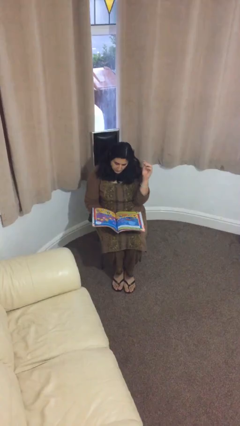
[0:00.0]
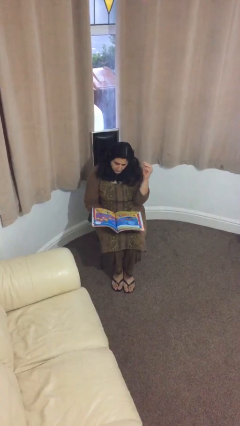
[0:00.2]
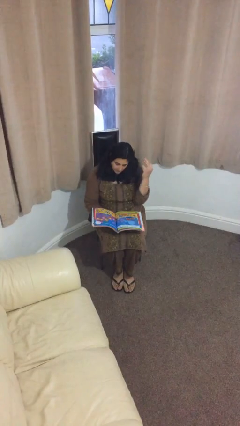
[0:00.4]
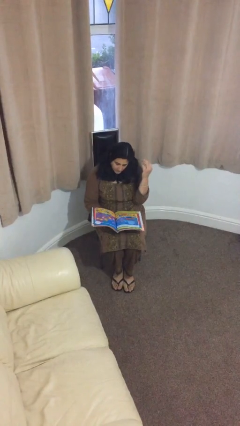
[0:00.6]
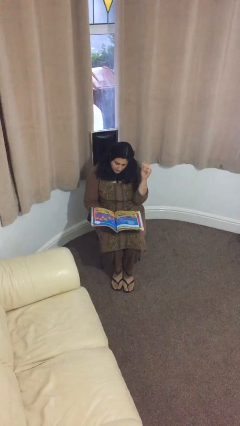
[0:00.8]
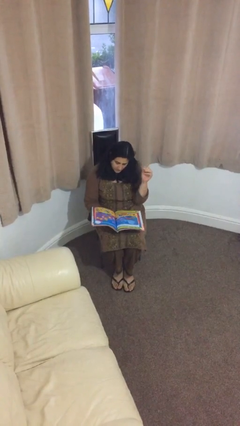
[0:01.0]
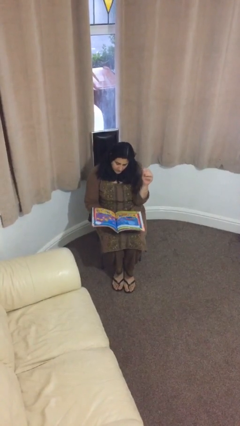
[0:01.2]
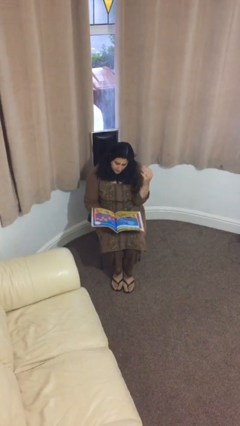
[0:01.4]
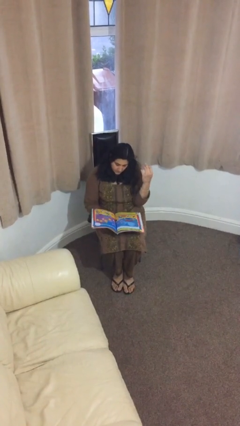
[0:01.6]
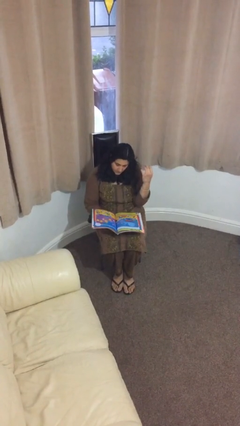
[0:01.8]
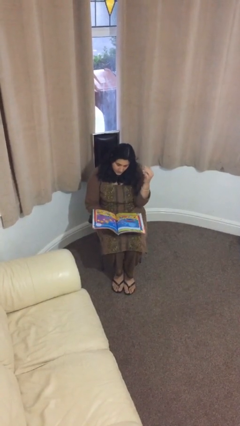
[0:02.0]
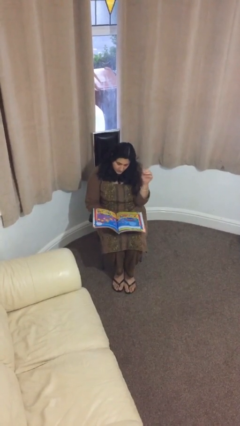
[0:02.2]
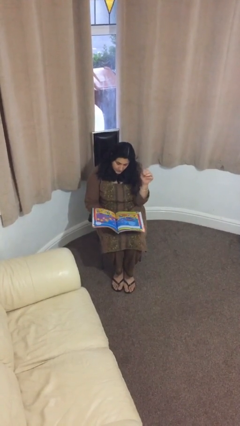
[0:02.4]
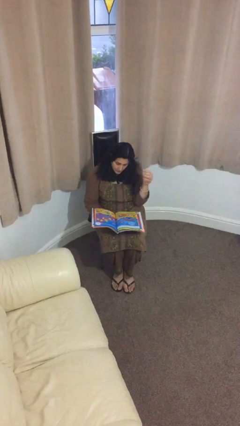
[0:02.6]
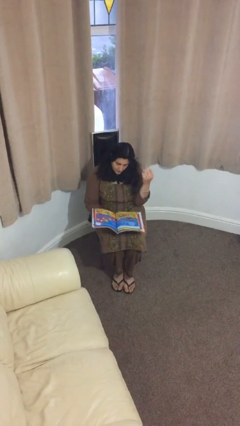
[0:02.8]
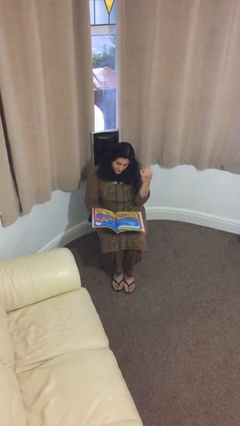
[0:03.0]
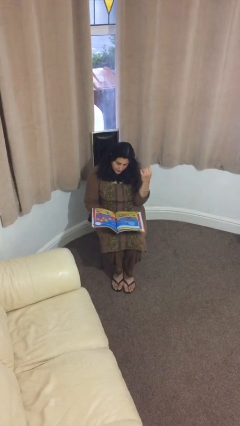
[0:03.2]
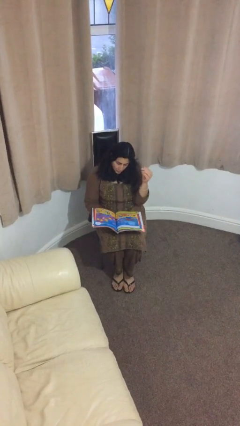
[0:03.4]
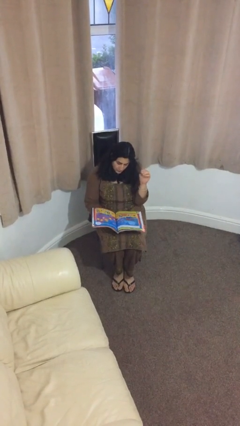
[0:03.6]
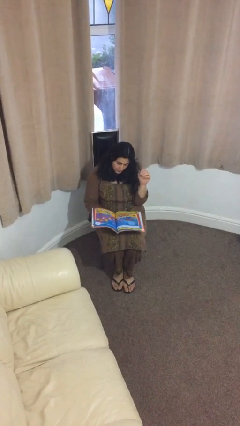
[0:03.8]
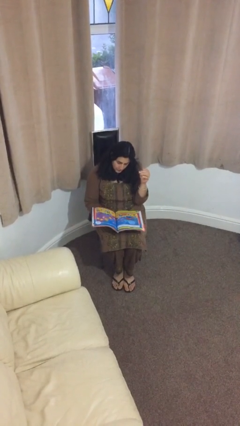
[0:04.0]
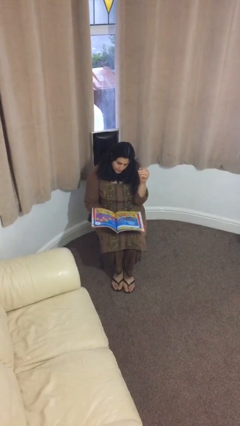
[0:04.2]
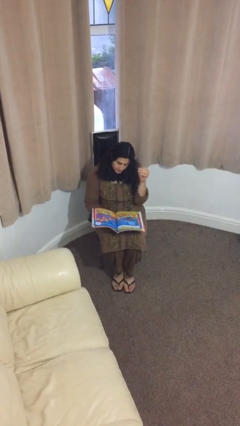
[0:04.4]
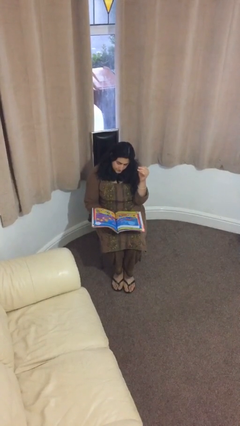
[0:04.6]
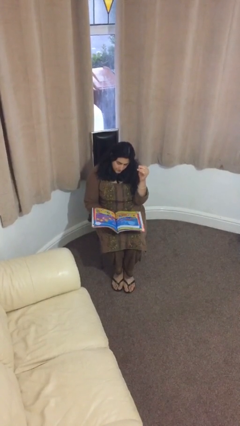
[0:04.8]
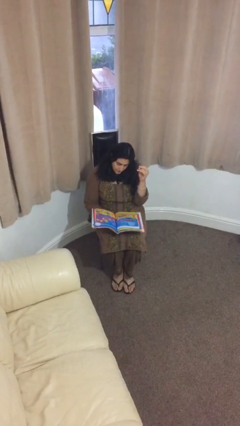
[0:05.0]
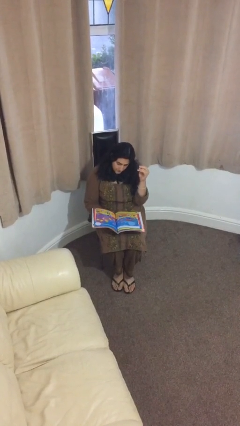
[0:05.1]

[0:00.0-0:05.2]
person reads document

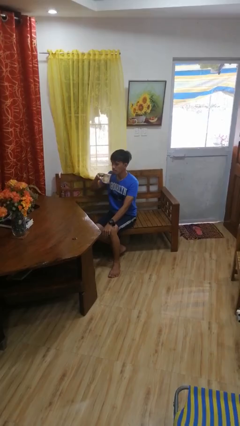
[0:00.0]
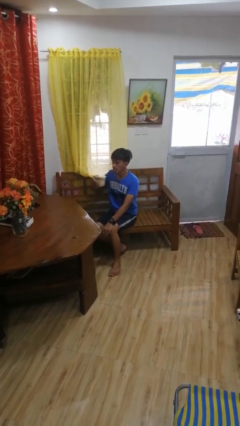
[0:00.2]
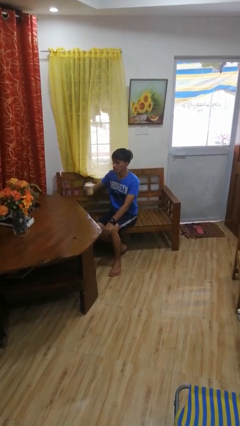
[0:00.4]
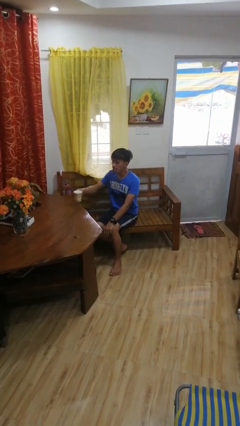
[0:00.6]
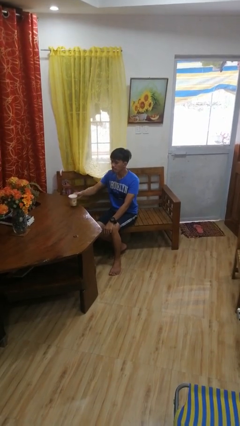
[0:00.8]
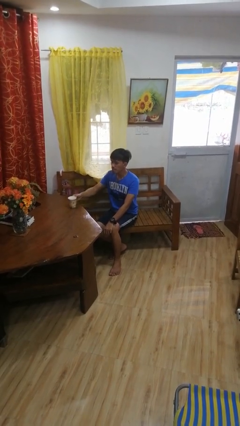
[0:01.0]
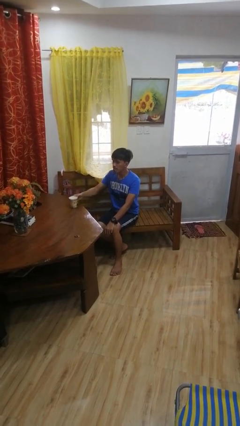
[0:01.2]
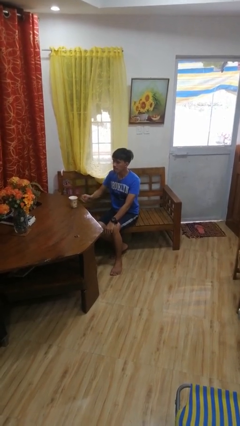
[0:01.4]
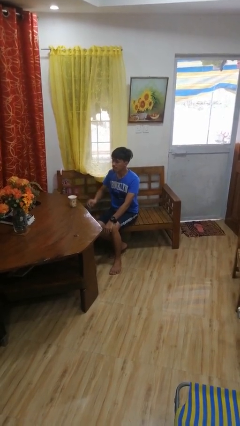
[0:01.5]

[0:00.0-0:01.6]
person puts down object on table

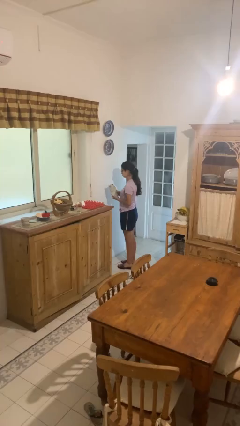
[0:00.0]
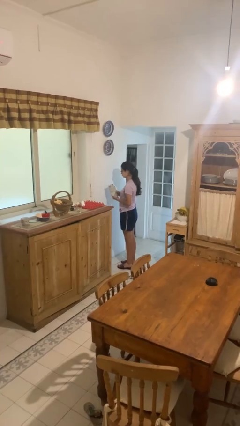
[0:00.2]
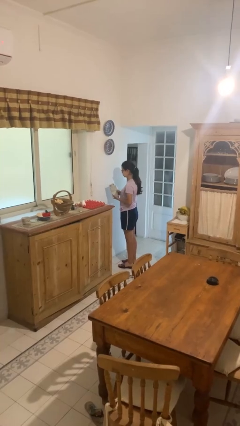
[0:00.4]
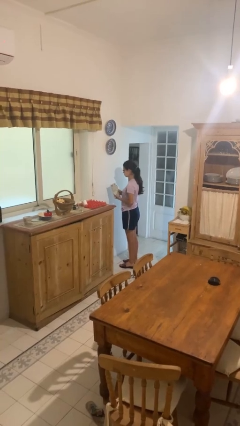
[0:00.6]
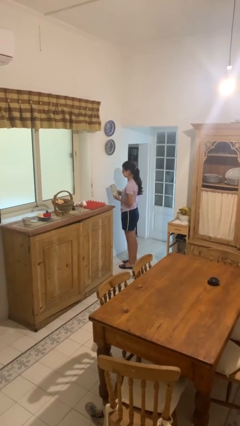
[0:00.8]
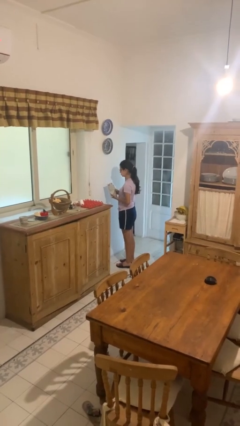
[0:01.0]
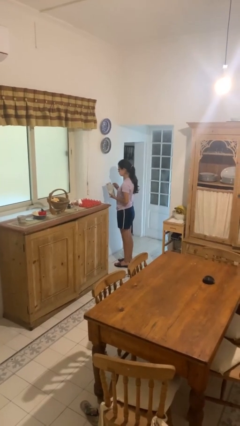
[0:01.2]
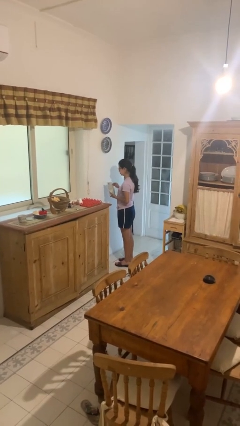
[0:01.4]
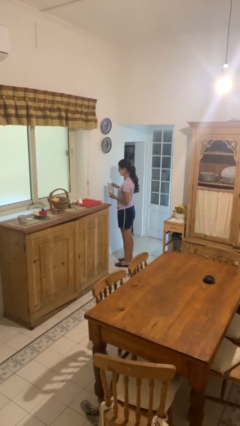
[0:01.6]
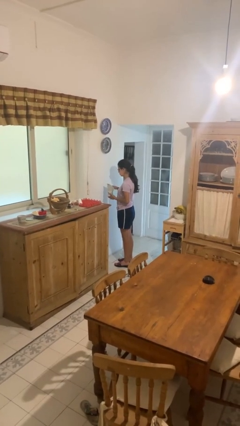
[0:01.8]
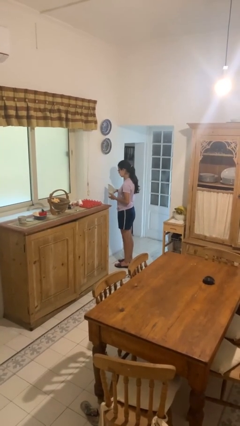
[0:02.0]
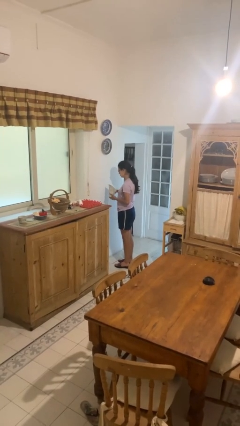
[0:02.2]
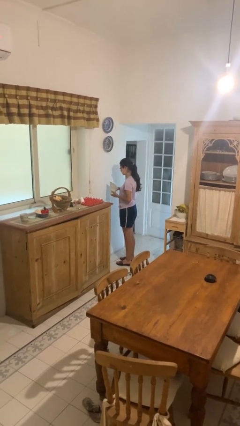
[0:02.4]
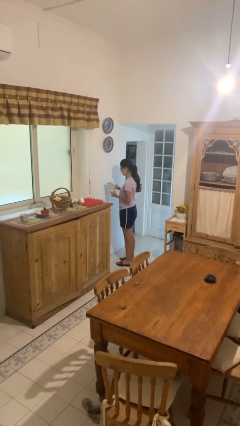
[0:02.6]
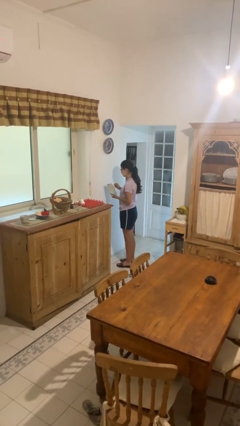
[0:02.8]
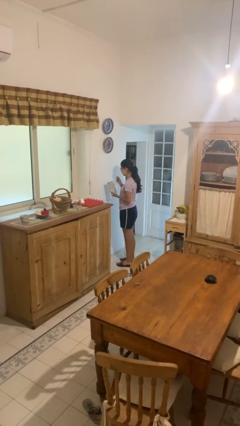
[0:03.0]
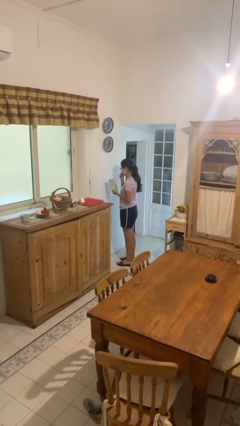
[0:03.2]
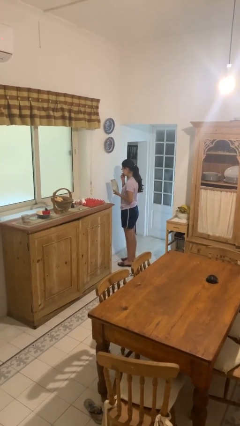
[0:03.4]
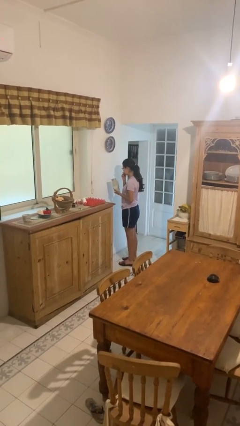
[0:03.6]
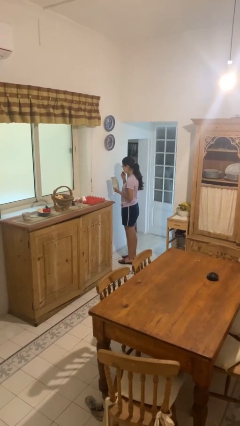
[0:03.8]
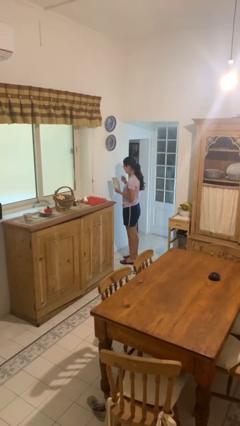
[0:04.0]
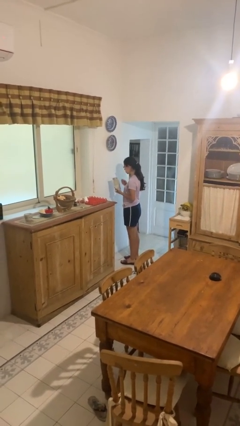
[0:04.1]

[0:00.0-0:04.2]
person eats snack from bag

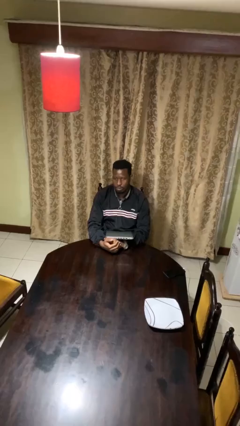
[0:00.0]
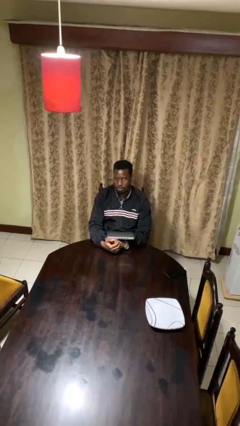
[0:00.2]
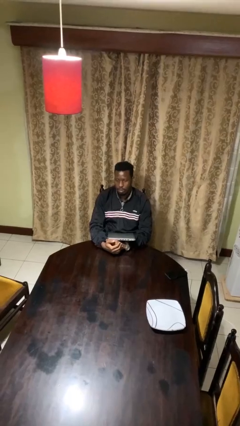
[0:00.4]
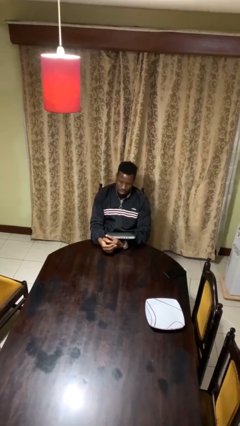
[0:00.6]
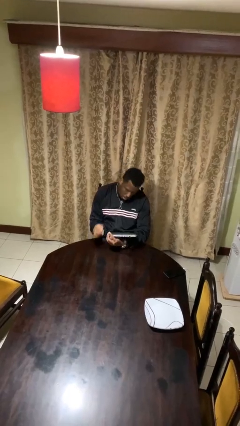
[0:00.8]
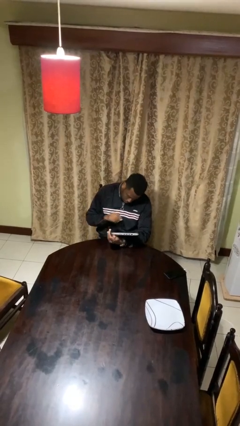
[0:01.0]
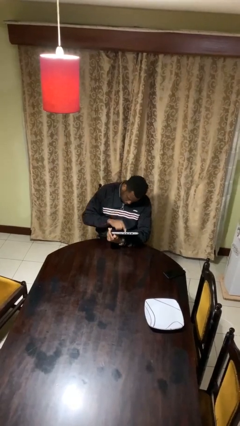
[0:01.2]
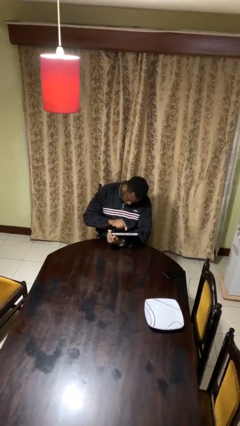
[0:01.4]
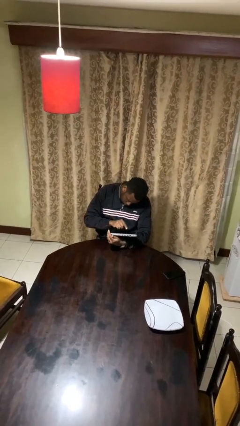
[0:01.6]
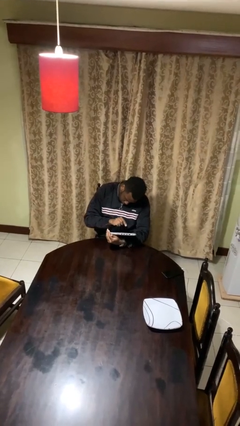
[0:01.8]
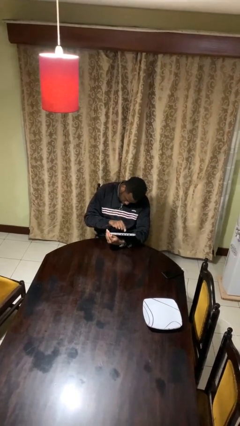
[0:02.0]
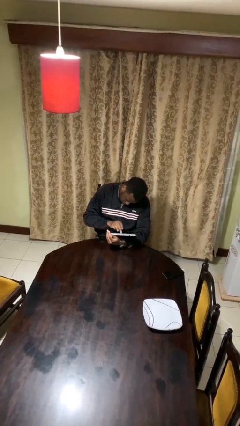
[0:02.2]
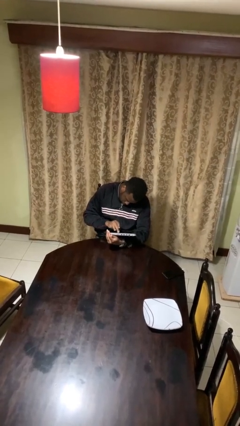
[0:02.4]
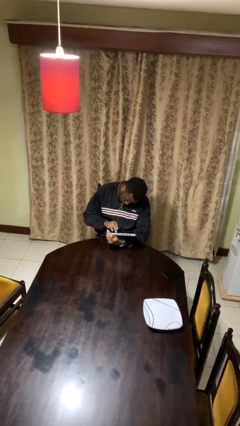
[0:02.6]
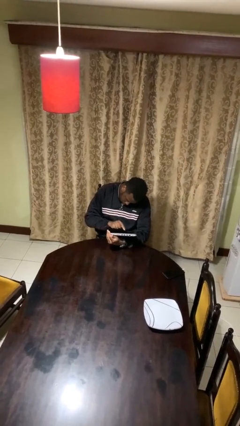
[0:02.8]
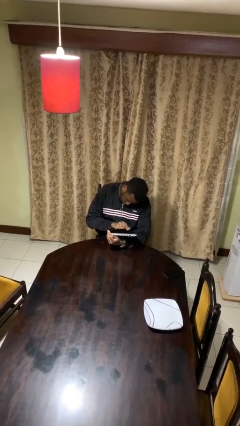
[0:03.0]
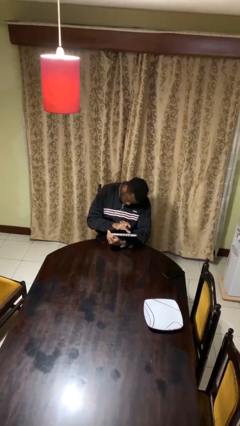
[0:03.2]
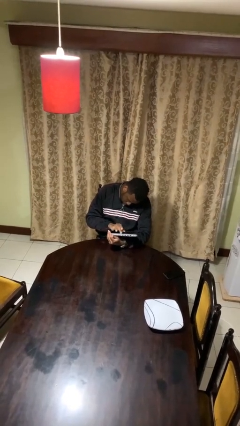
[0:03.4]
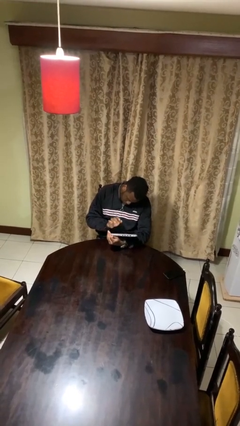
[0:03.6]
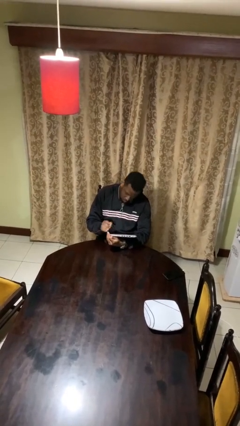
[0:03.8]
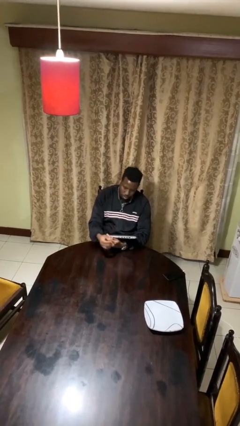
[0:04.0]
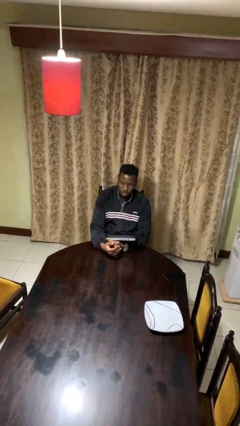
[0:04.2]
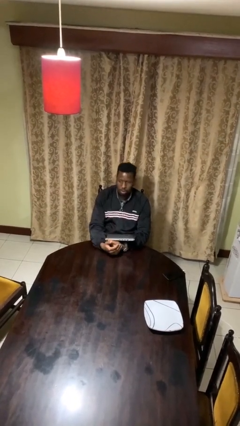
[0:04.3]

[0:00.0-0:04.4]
person interacts with tablet

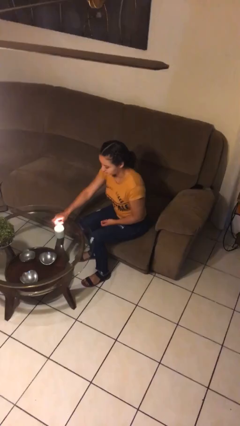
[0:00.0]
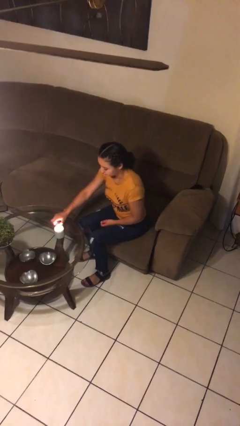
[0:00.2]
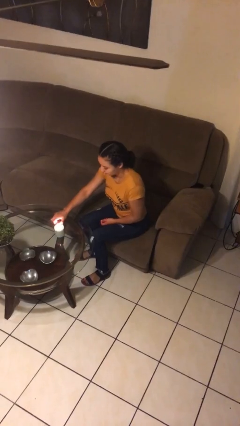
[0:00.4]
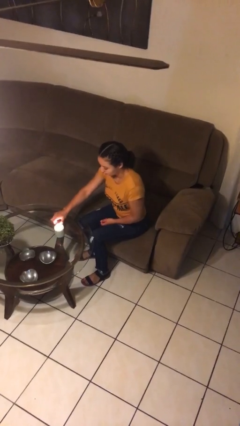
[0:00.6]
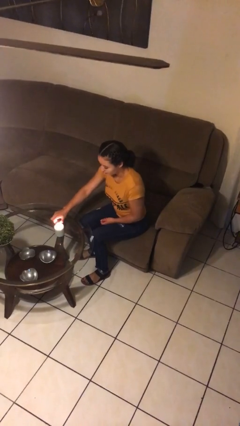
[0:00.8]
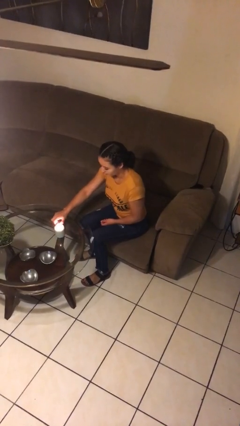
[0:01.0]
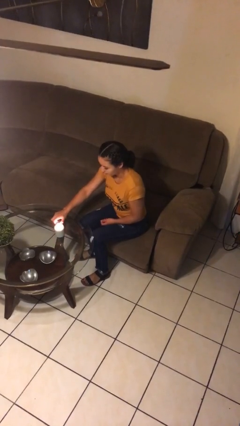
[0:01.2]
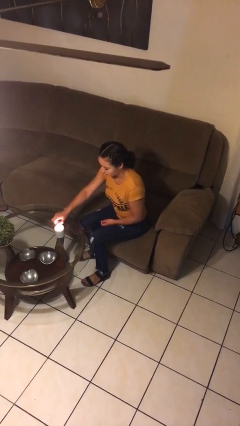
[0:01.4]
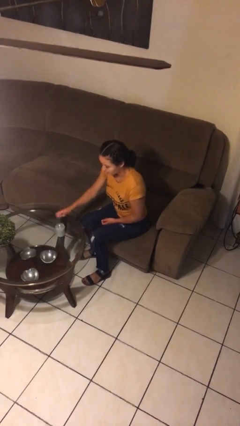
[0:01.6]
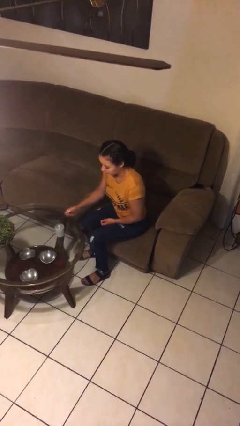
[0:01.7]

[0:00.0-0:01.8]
person lights candle

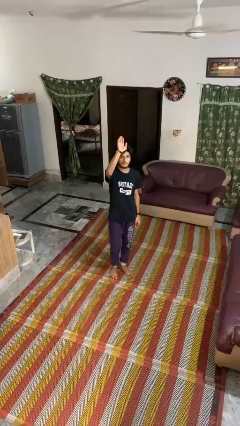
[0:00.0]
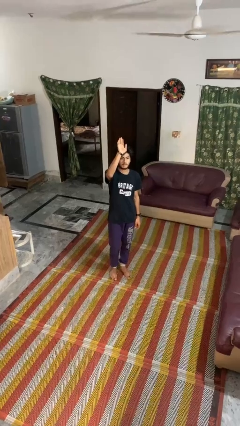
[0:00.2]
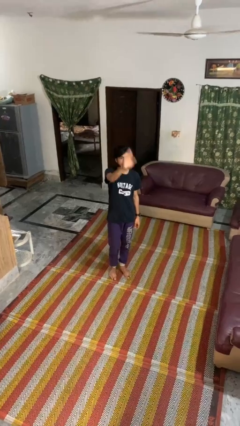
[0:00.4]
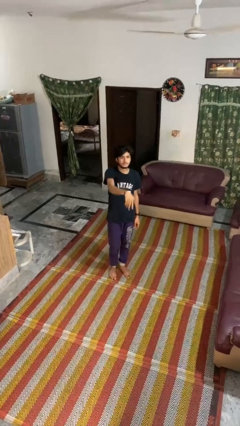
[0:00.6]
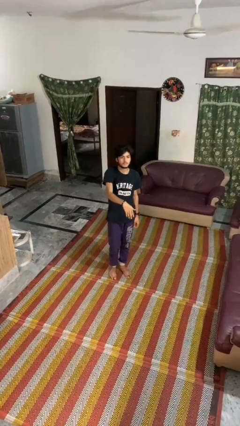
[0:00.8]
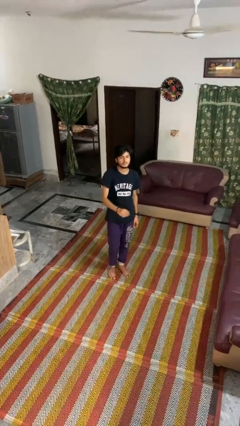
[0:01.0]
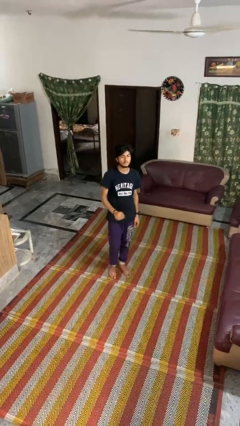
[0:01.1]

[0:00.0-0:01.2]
person gestures swipe down
